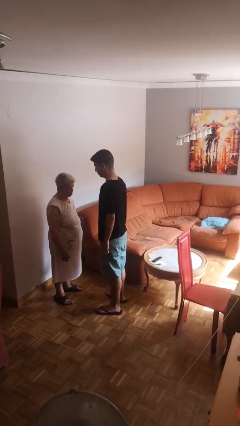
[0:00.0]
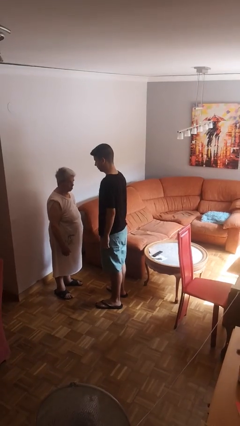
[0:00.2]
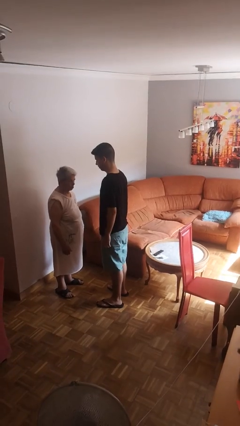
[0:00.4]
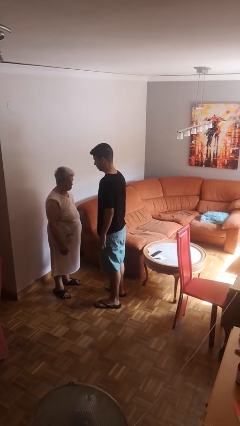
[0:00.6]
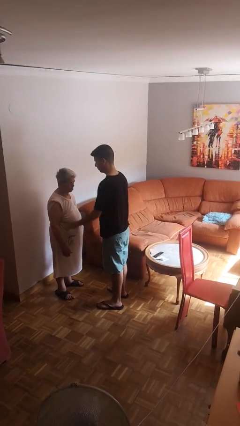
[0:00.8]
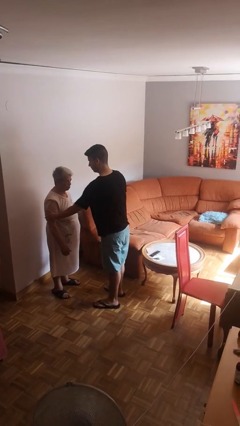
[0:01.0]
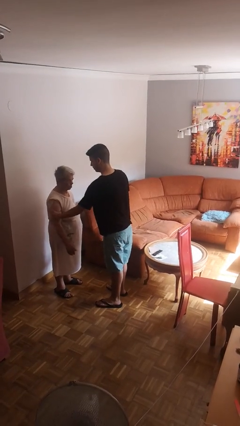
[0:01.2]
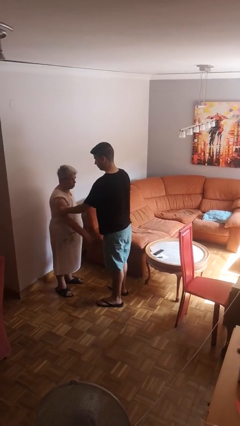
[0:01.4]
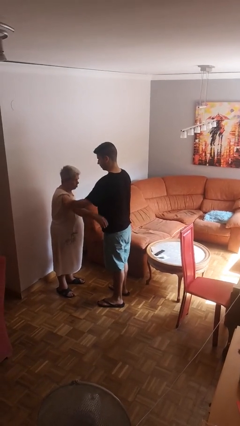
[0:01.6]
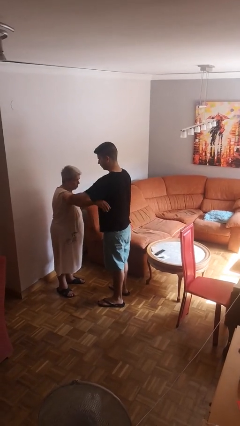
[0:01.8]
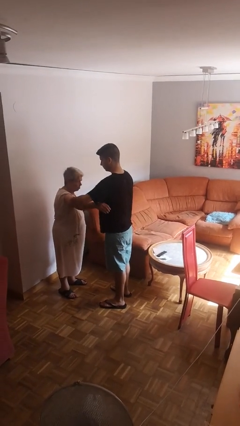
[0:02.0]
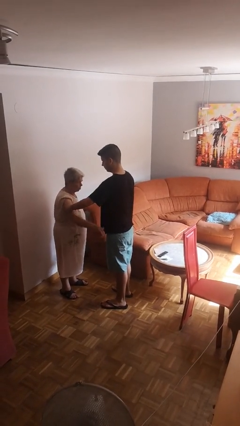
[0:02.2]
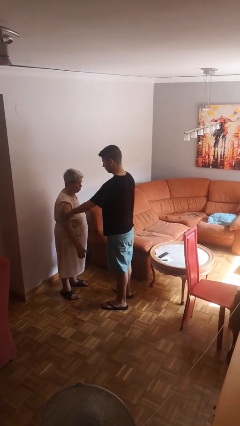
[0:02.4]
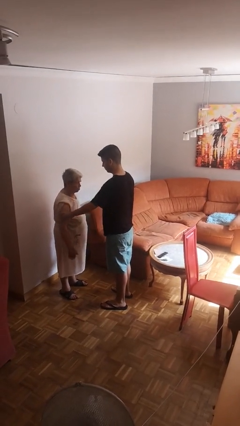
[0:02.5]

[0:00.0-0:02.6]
person grabs person by bicep

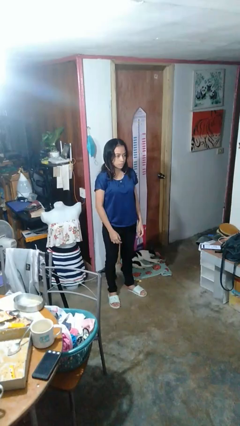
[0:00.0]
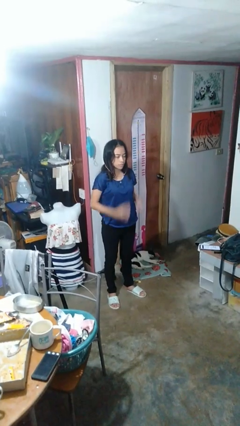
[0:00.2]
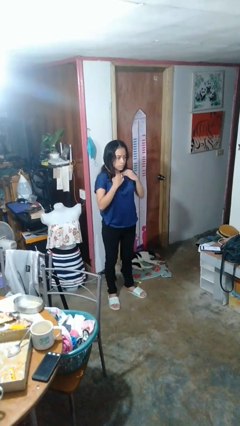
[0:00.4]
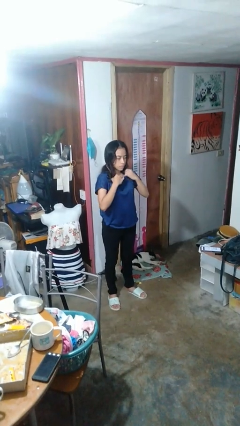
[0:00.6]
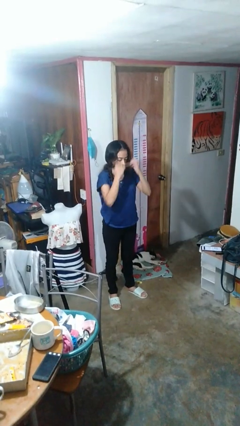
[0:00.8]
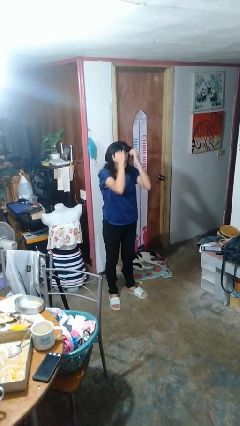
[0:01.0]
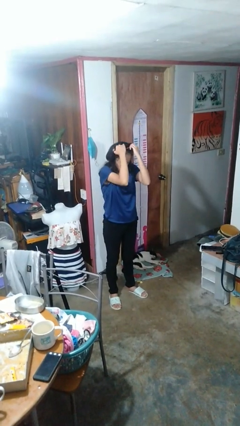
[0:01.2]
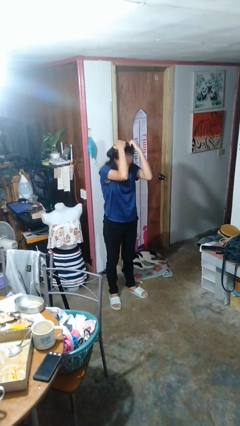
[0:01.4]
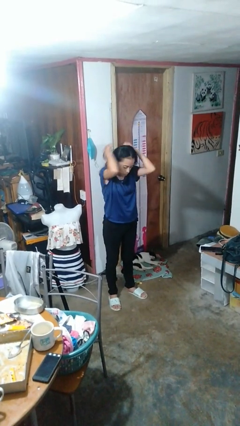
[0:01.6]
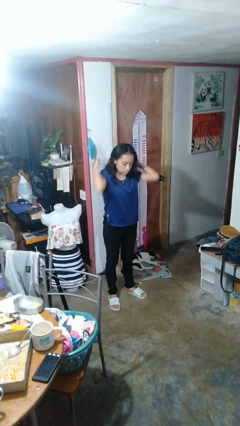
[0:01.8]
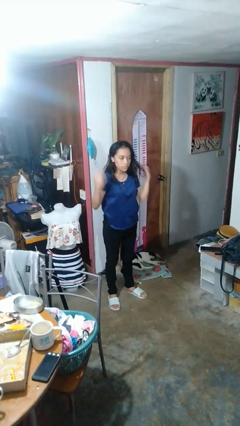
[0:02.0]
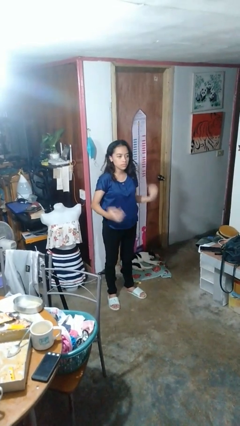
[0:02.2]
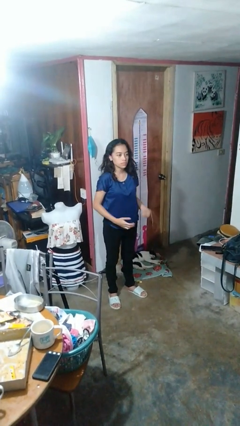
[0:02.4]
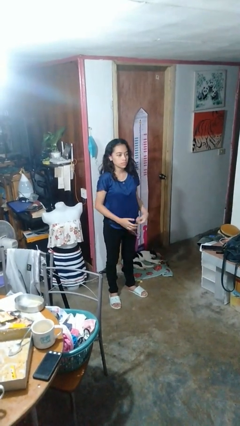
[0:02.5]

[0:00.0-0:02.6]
person takes off necklace

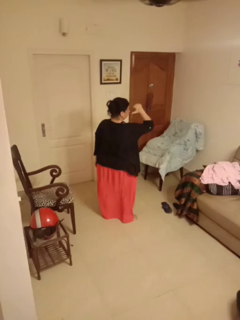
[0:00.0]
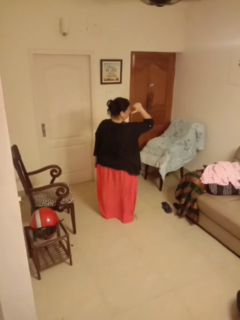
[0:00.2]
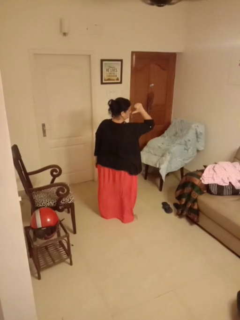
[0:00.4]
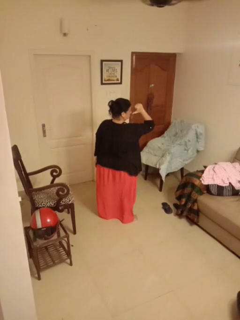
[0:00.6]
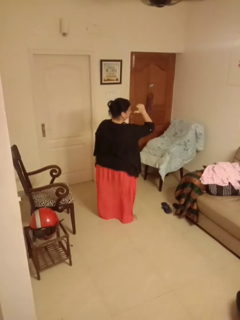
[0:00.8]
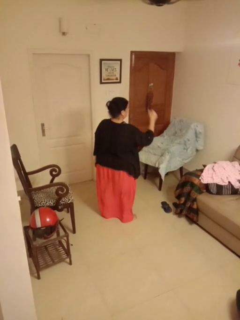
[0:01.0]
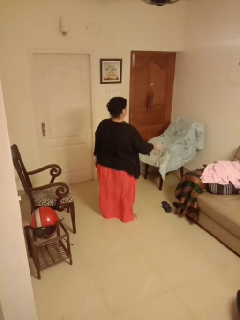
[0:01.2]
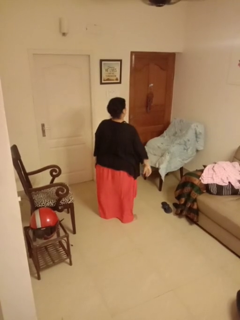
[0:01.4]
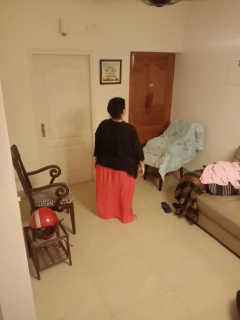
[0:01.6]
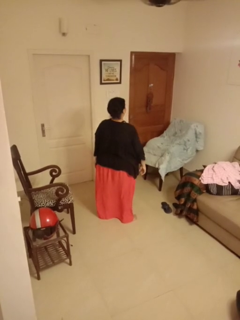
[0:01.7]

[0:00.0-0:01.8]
person gestures behind me

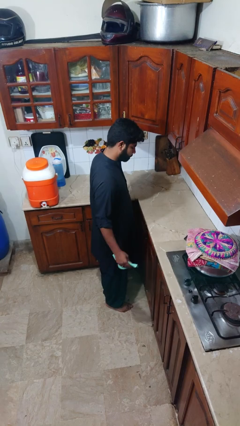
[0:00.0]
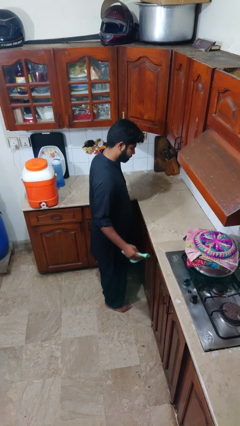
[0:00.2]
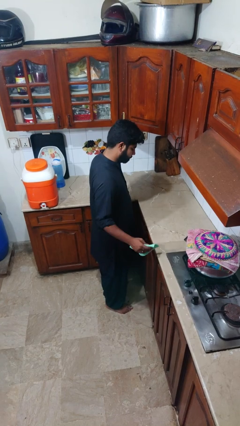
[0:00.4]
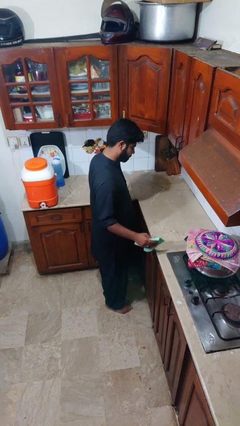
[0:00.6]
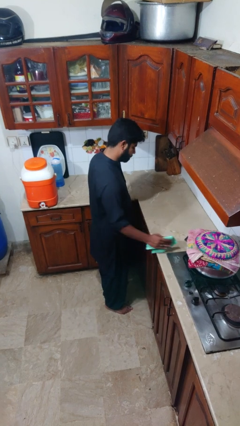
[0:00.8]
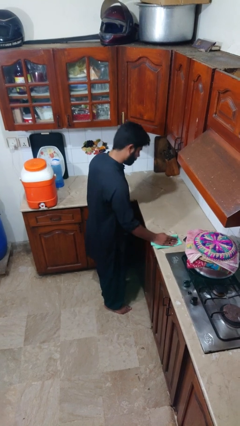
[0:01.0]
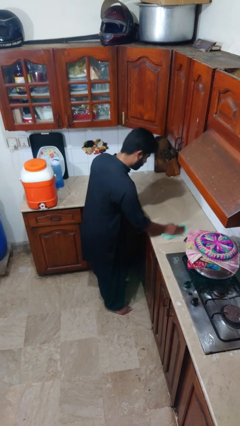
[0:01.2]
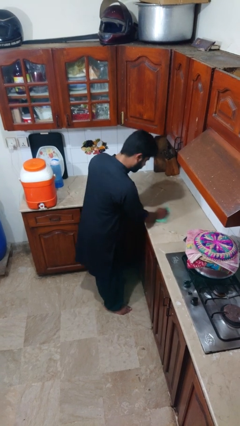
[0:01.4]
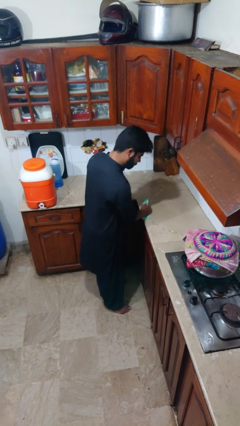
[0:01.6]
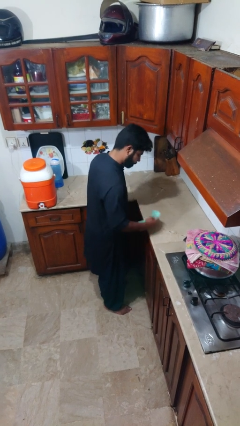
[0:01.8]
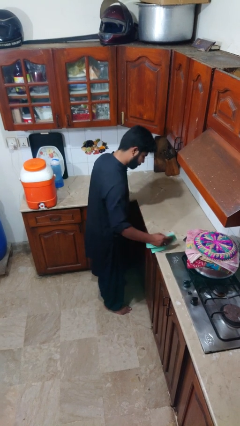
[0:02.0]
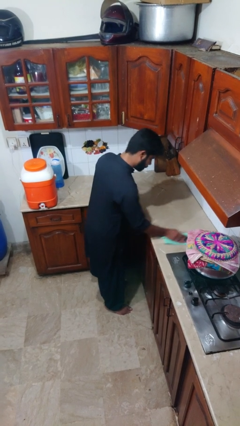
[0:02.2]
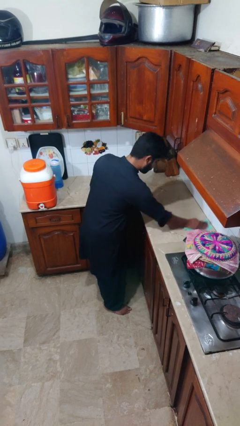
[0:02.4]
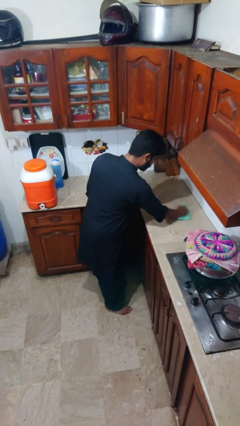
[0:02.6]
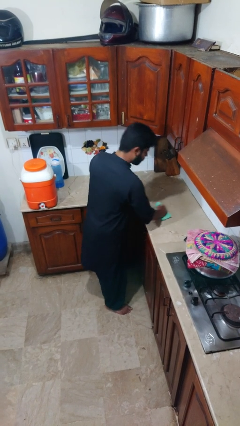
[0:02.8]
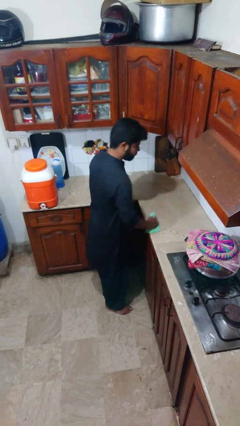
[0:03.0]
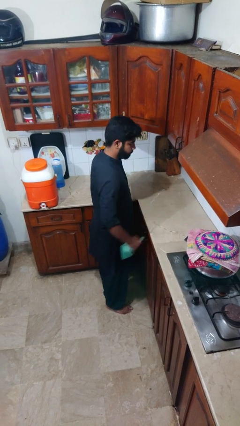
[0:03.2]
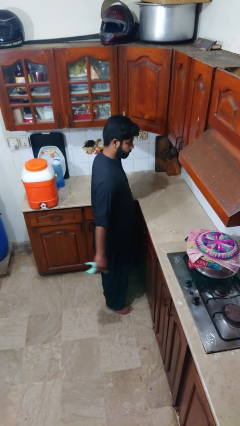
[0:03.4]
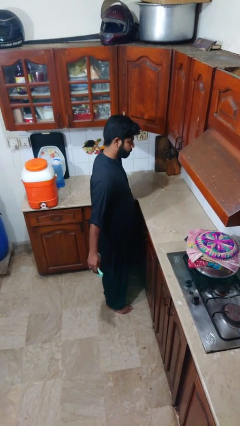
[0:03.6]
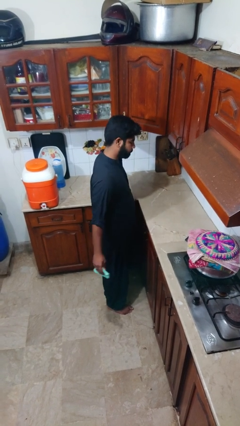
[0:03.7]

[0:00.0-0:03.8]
person cleans table with rag

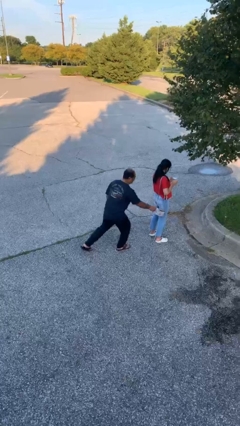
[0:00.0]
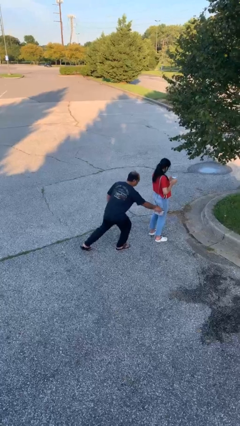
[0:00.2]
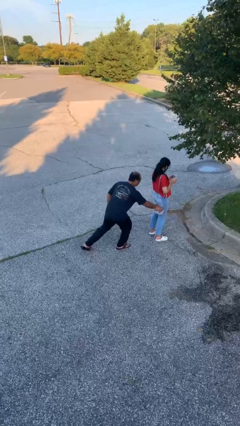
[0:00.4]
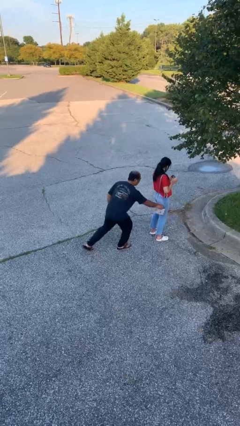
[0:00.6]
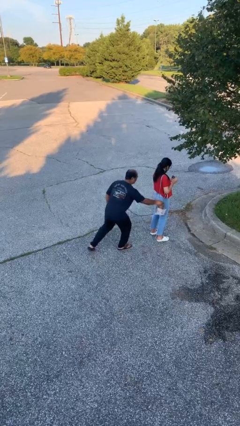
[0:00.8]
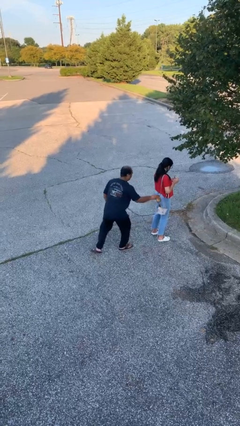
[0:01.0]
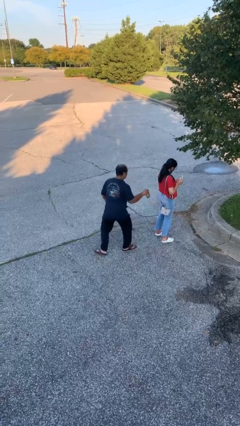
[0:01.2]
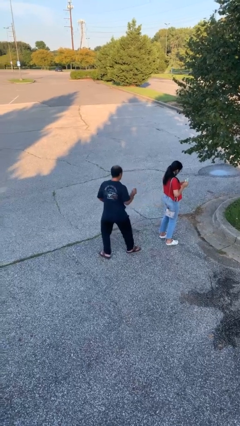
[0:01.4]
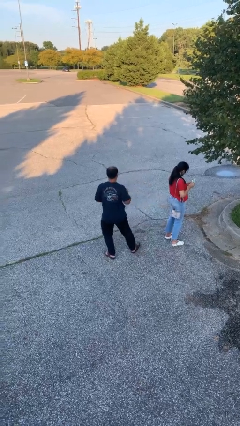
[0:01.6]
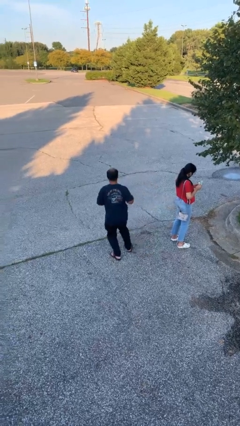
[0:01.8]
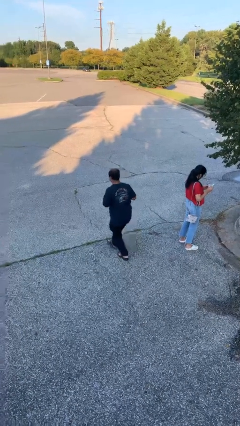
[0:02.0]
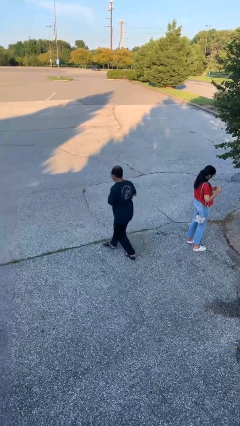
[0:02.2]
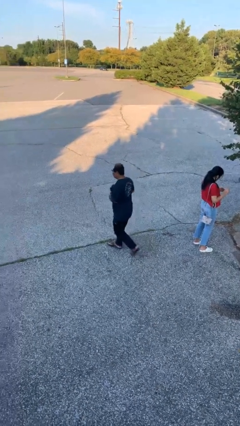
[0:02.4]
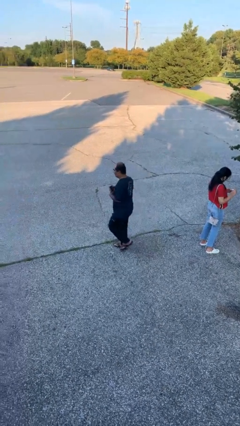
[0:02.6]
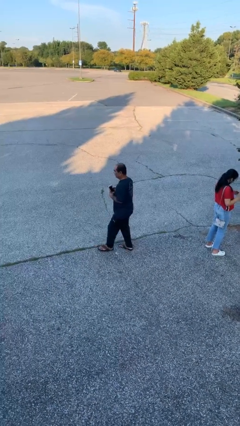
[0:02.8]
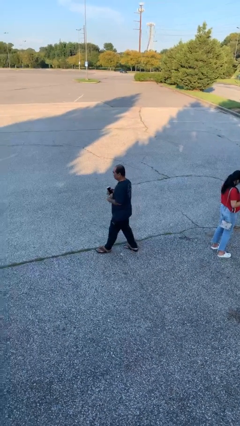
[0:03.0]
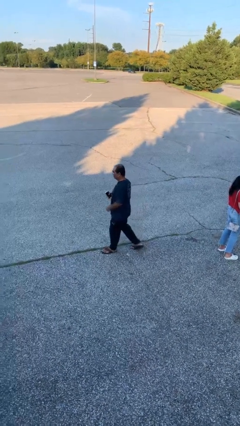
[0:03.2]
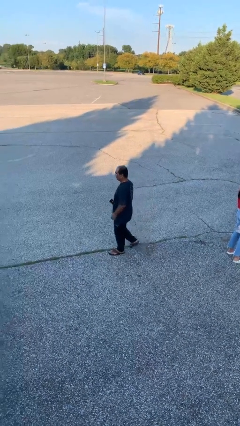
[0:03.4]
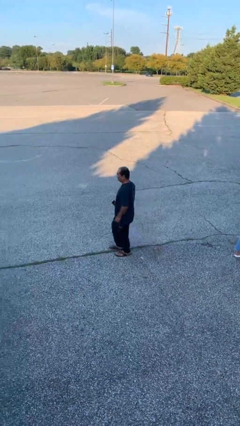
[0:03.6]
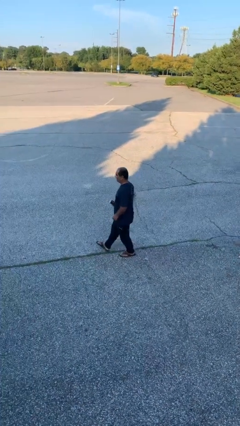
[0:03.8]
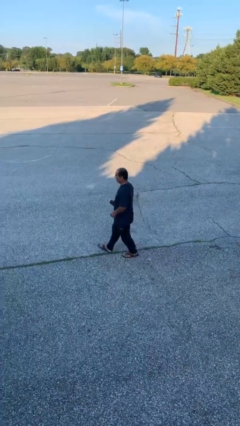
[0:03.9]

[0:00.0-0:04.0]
person steals object from person

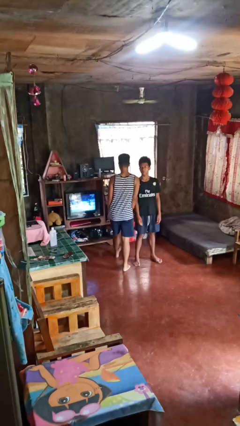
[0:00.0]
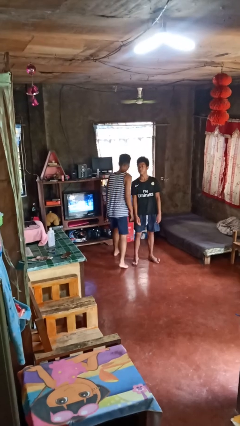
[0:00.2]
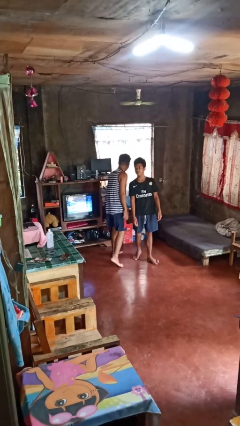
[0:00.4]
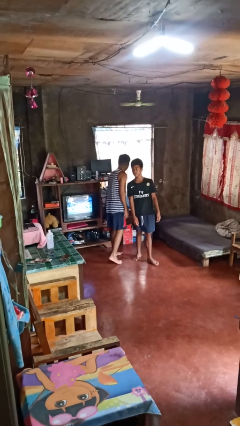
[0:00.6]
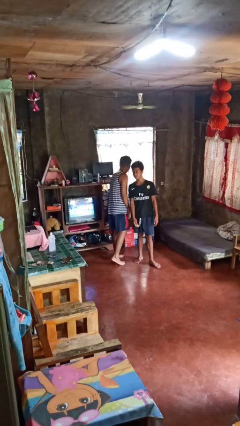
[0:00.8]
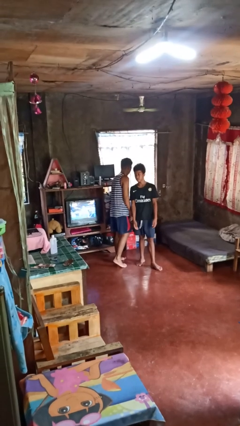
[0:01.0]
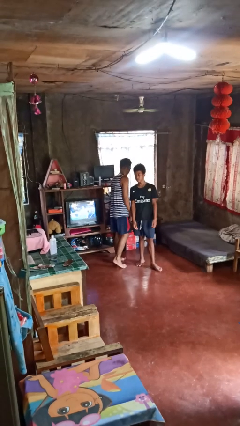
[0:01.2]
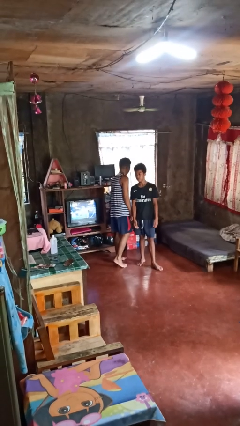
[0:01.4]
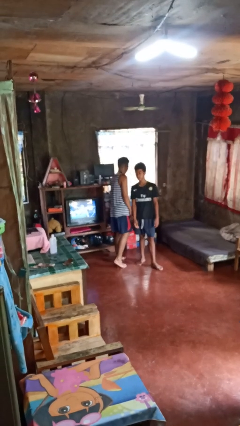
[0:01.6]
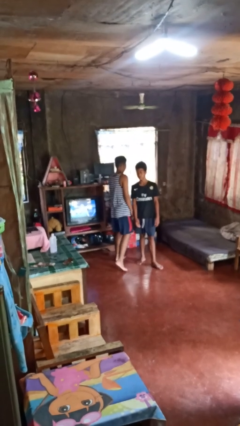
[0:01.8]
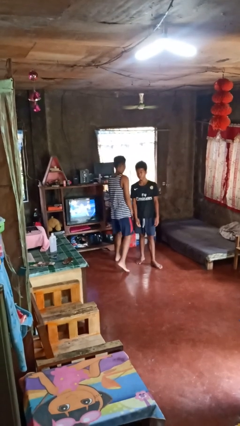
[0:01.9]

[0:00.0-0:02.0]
person bumps into person

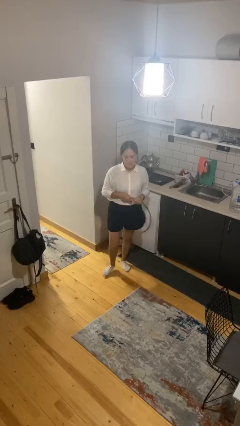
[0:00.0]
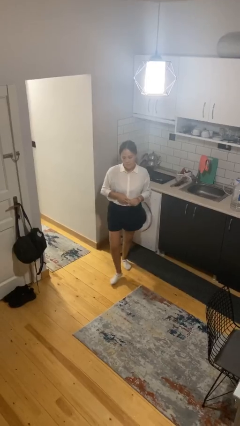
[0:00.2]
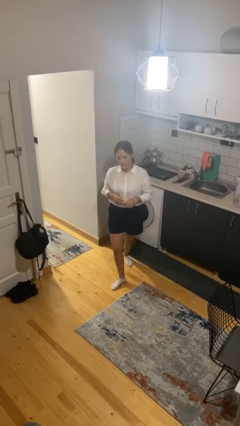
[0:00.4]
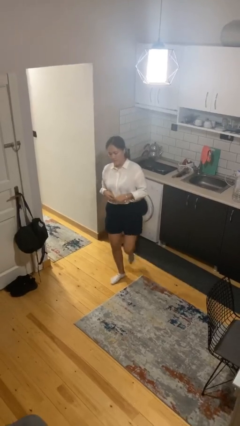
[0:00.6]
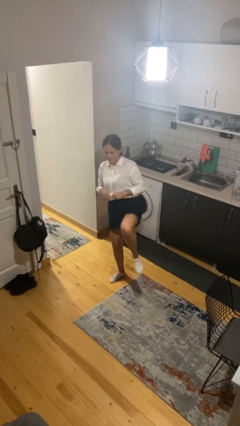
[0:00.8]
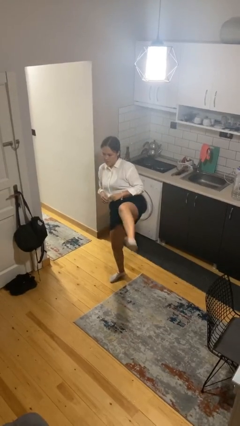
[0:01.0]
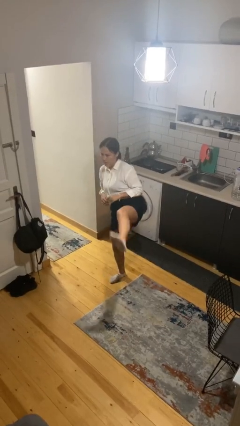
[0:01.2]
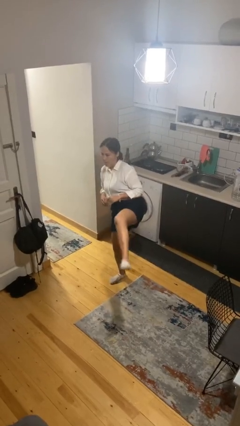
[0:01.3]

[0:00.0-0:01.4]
person karate kicks
